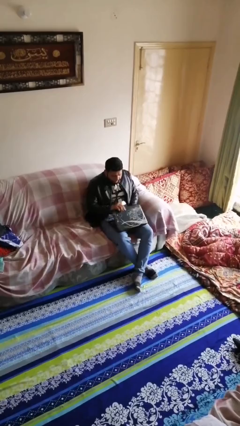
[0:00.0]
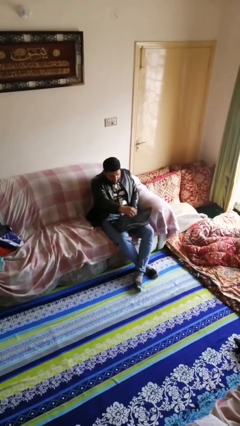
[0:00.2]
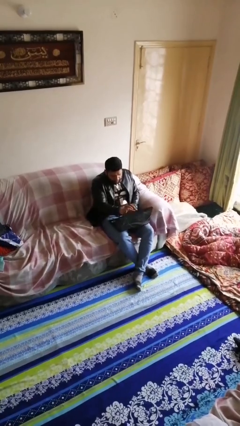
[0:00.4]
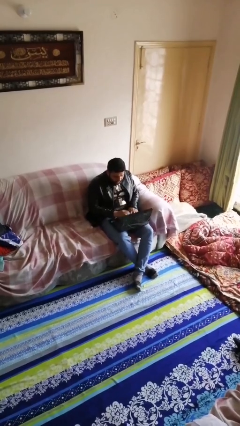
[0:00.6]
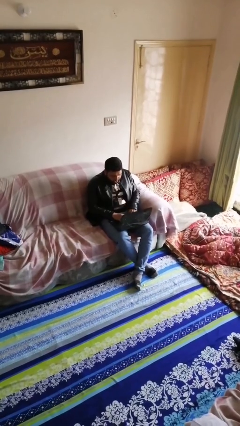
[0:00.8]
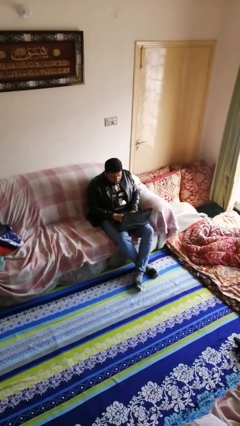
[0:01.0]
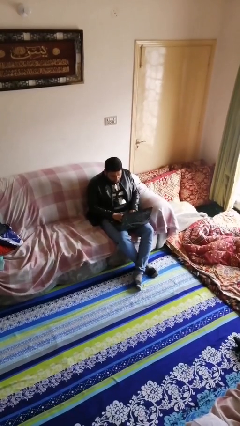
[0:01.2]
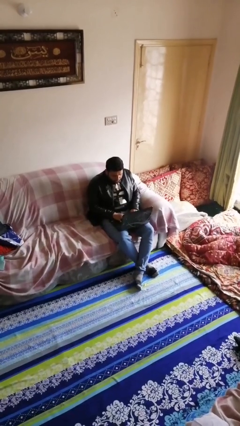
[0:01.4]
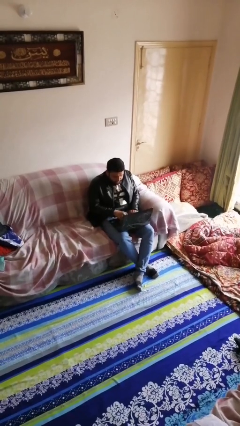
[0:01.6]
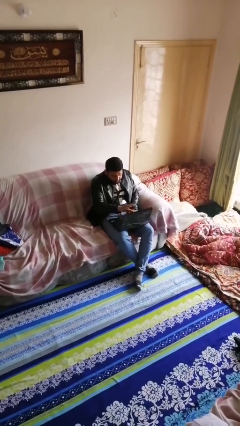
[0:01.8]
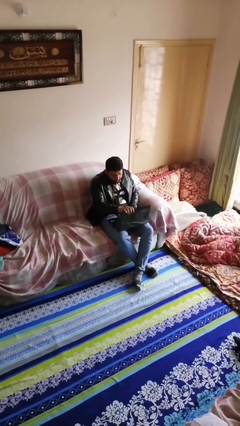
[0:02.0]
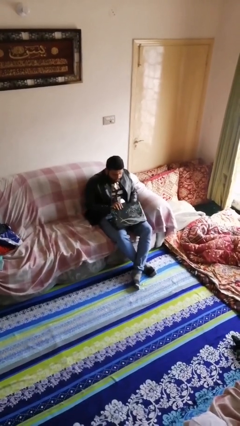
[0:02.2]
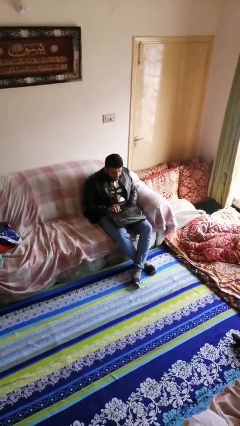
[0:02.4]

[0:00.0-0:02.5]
person interacts with laptop

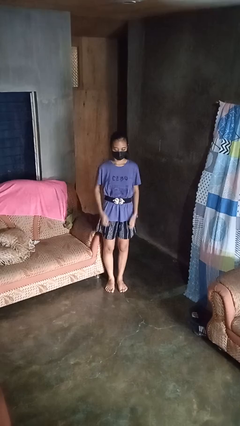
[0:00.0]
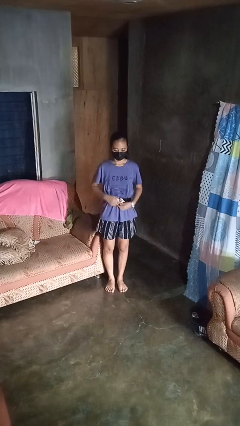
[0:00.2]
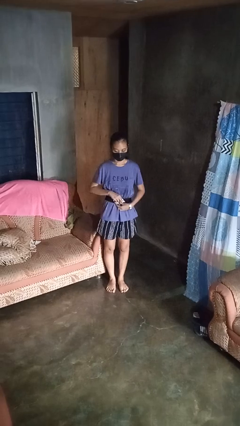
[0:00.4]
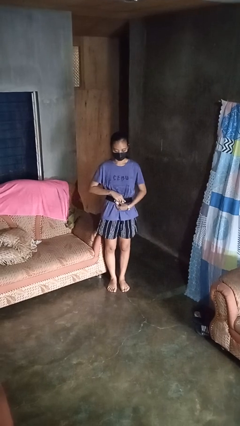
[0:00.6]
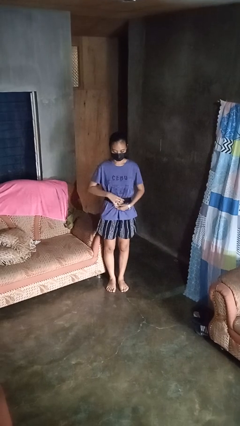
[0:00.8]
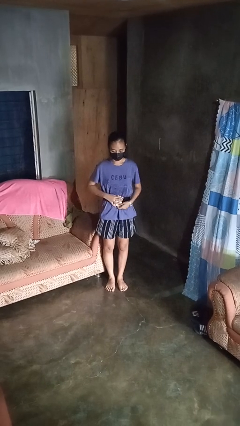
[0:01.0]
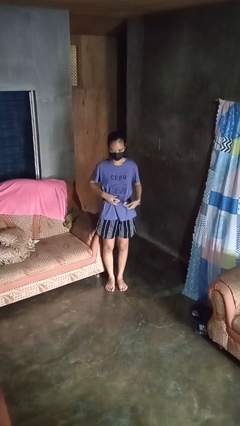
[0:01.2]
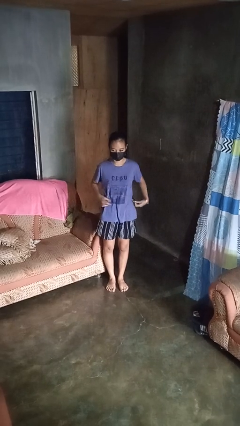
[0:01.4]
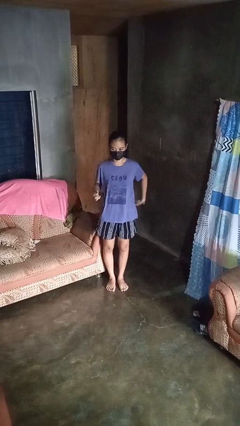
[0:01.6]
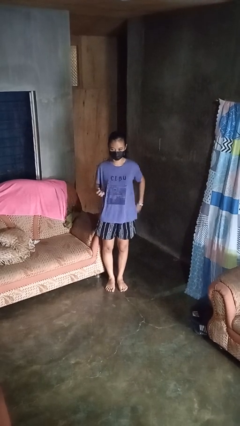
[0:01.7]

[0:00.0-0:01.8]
person takes off belt

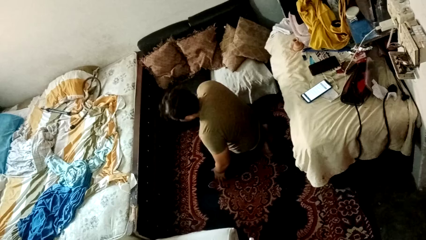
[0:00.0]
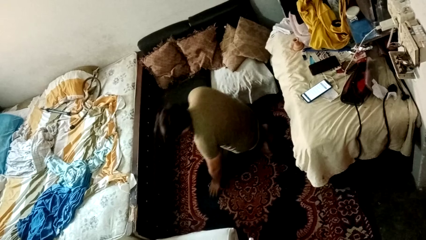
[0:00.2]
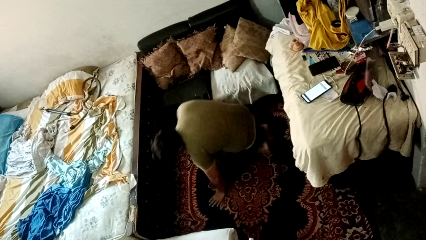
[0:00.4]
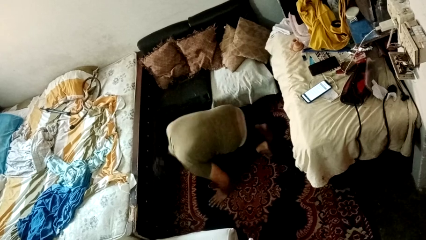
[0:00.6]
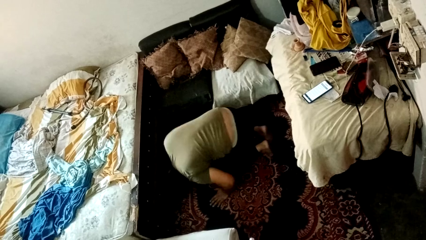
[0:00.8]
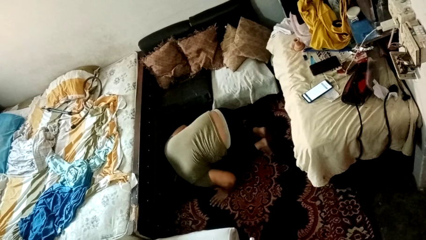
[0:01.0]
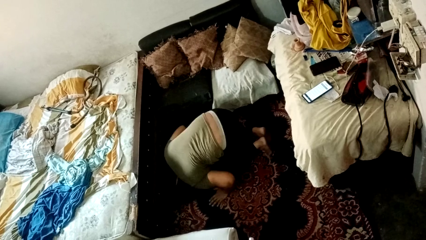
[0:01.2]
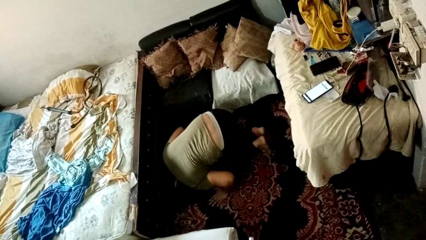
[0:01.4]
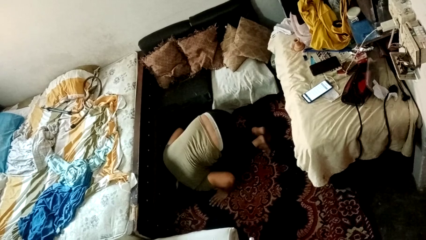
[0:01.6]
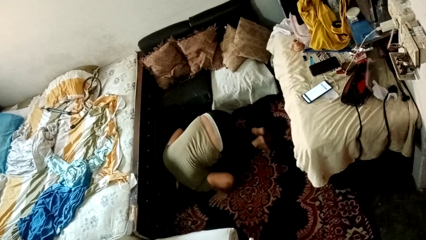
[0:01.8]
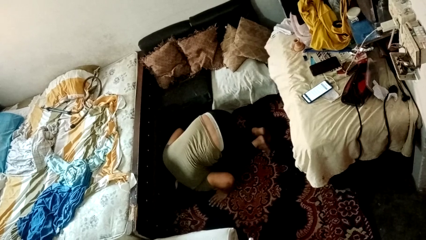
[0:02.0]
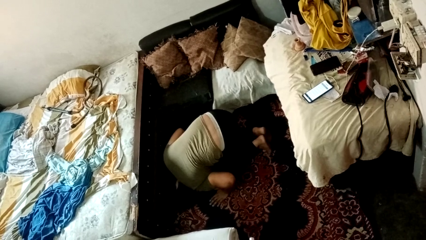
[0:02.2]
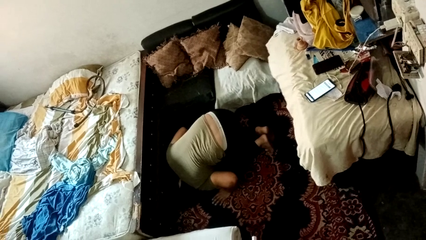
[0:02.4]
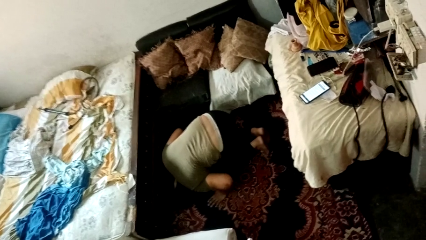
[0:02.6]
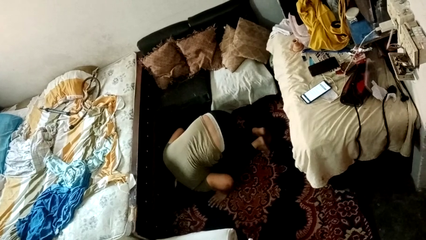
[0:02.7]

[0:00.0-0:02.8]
person searches under bed

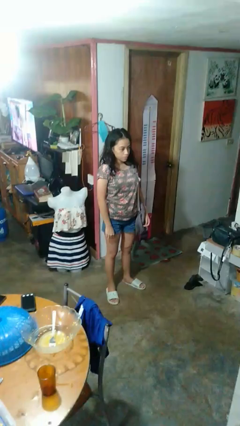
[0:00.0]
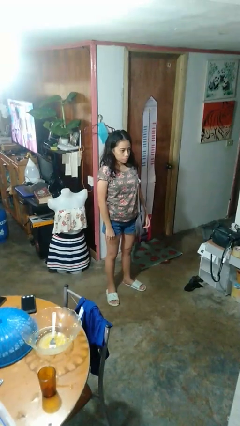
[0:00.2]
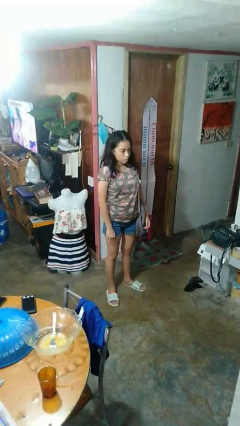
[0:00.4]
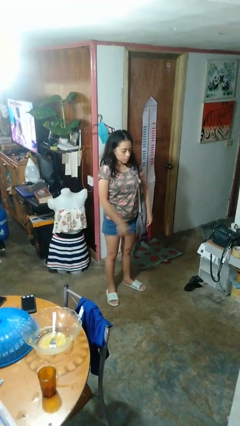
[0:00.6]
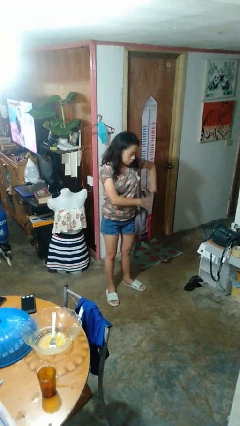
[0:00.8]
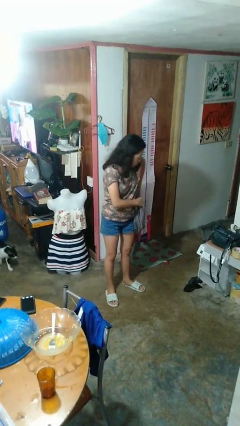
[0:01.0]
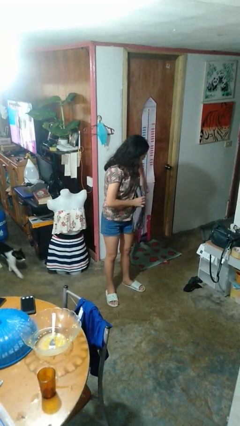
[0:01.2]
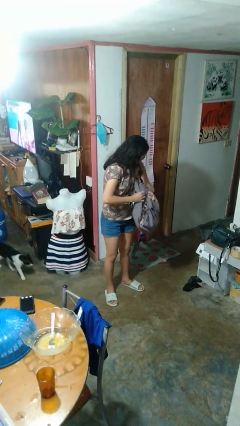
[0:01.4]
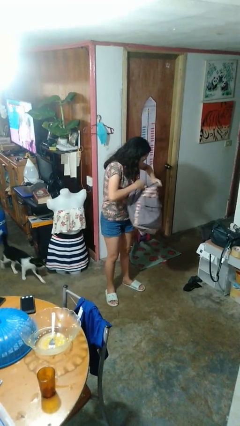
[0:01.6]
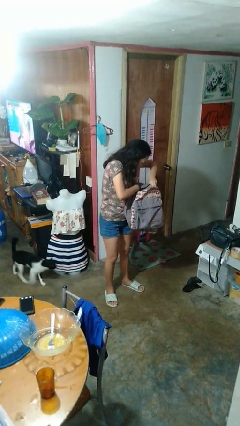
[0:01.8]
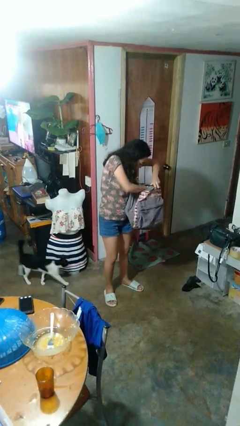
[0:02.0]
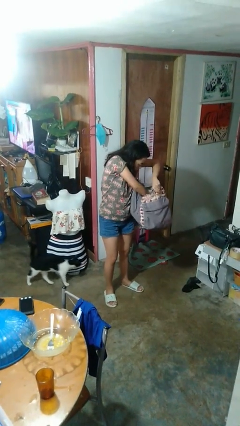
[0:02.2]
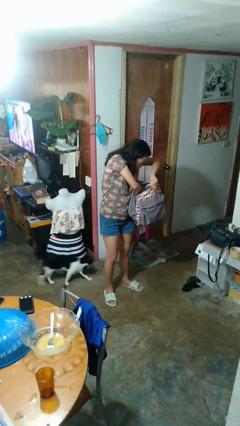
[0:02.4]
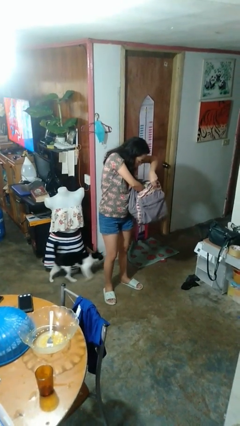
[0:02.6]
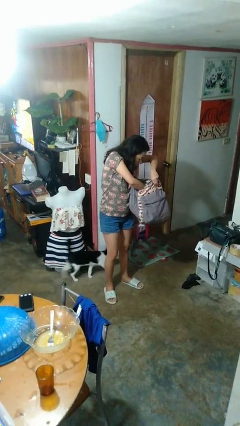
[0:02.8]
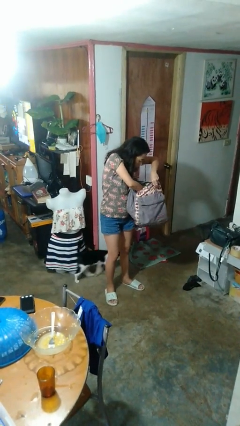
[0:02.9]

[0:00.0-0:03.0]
person searches in backpack

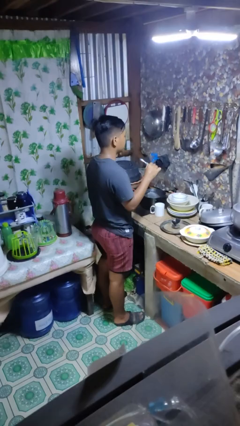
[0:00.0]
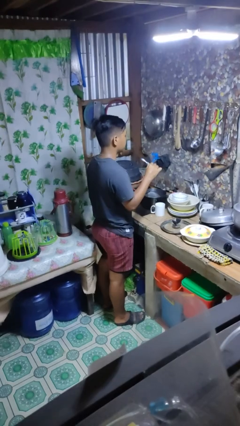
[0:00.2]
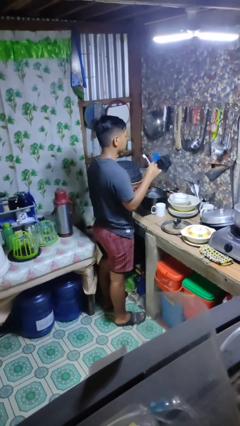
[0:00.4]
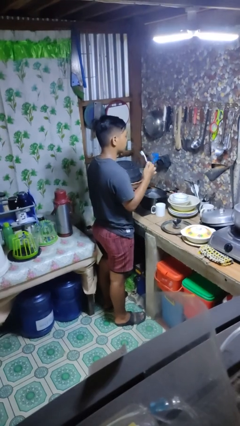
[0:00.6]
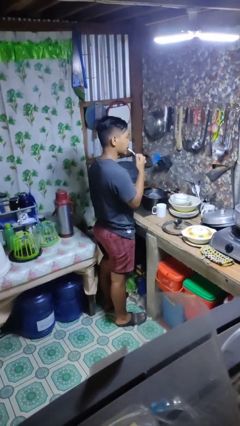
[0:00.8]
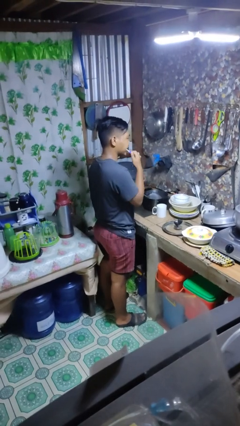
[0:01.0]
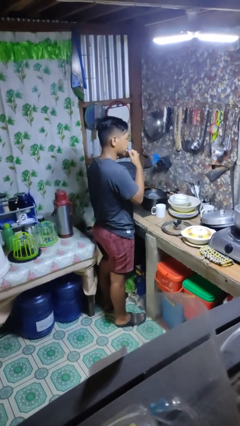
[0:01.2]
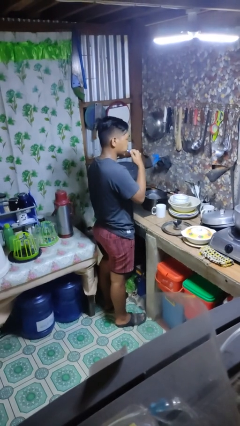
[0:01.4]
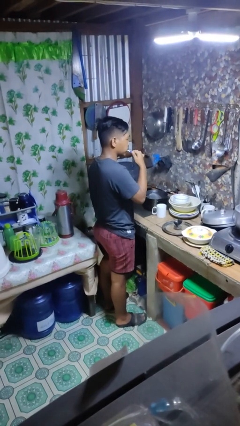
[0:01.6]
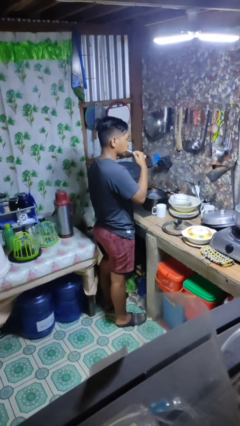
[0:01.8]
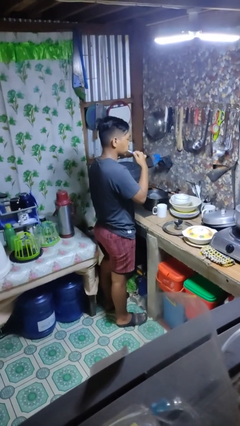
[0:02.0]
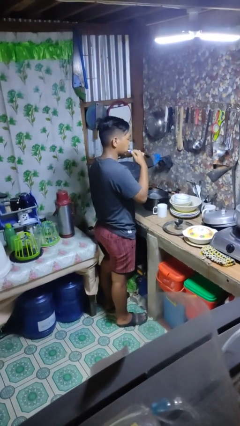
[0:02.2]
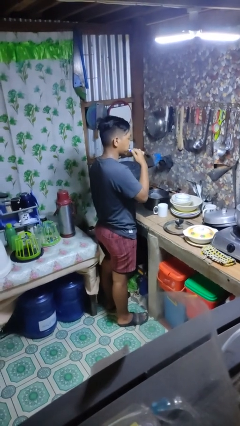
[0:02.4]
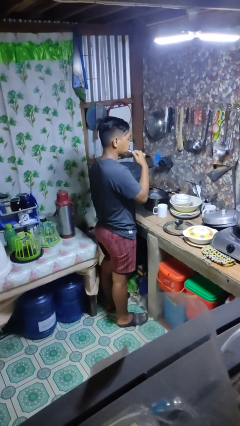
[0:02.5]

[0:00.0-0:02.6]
person brushes teeth

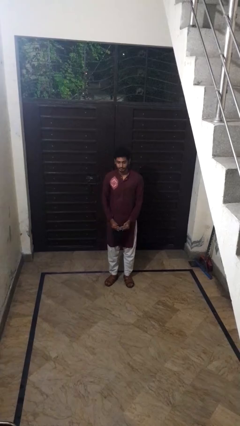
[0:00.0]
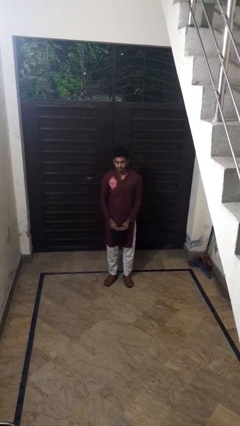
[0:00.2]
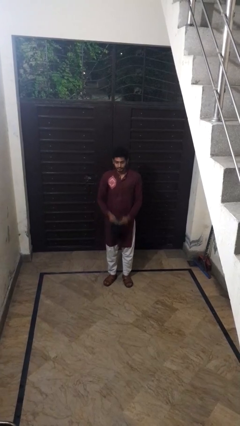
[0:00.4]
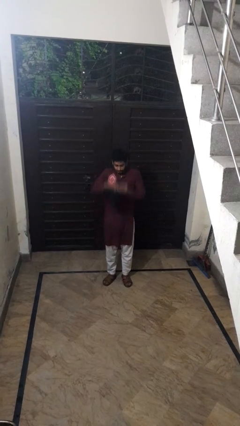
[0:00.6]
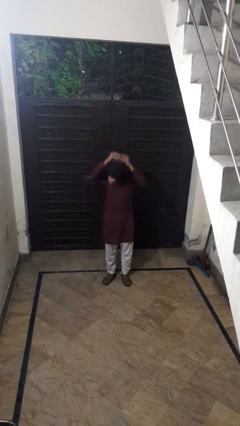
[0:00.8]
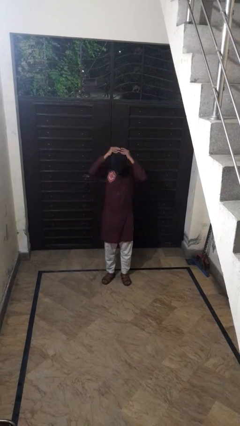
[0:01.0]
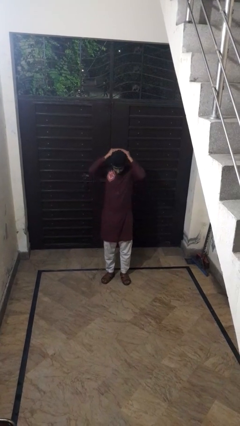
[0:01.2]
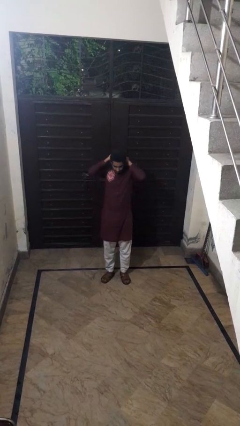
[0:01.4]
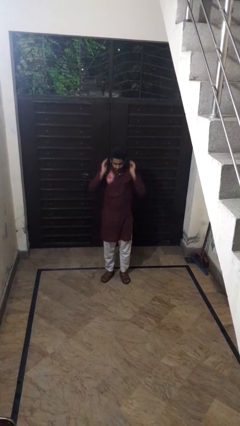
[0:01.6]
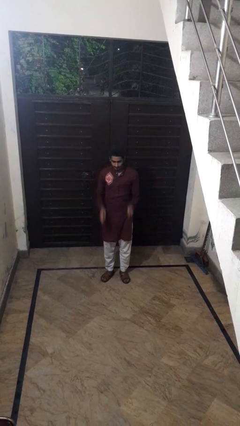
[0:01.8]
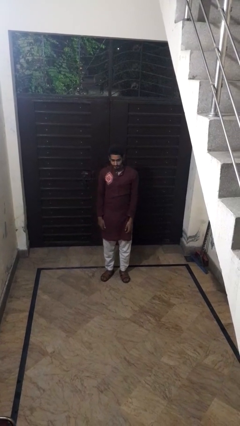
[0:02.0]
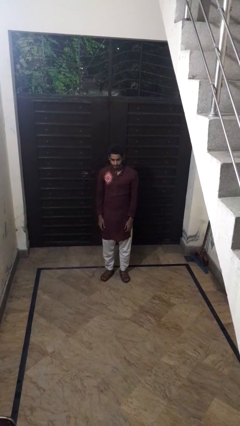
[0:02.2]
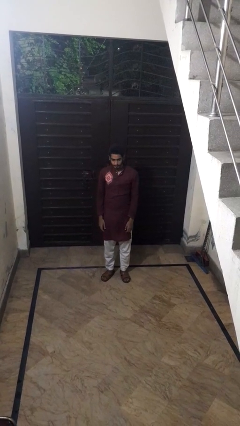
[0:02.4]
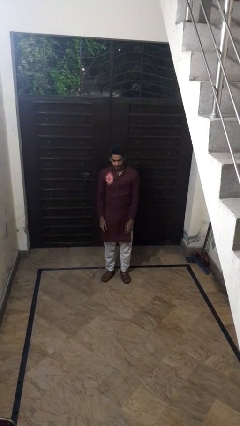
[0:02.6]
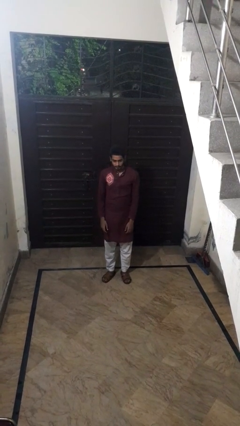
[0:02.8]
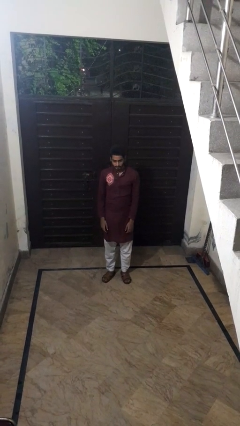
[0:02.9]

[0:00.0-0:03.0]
person puts on hat

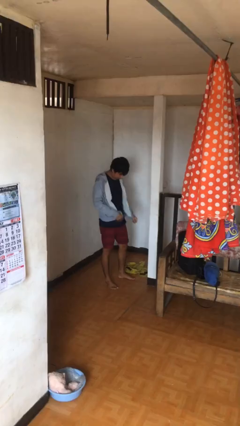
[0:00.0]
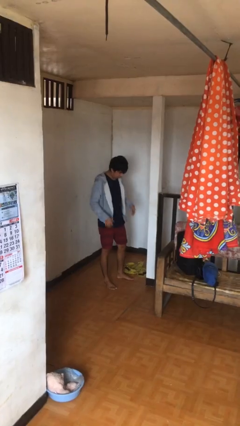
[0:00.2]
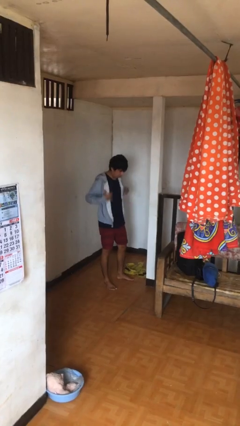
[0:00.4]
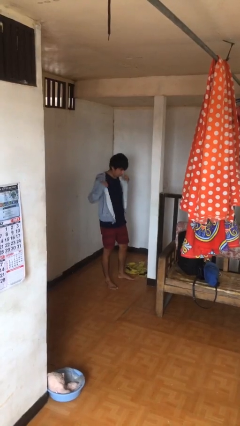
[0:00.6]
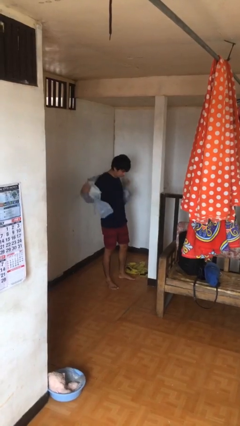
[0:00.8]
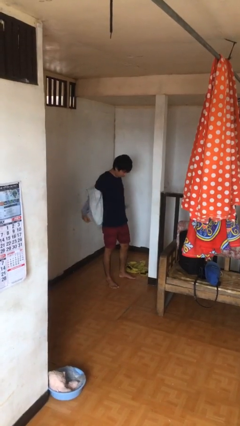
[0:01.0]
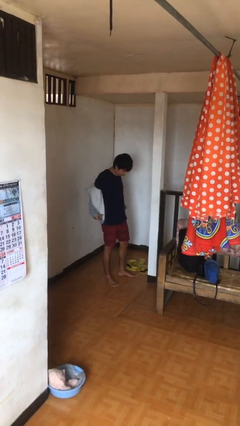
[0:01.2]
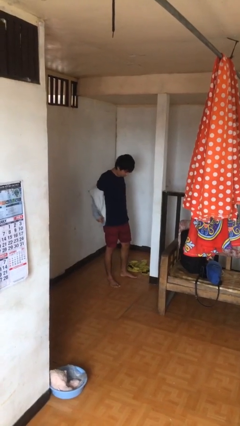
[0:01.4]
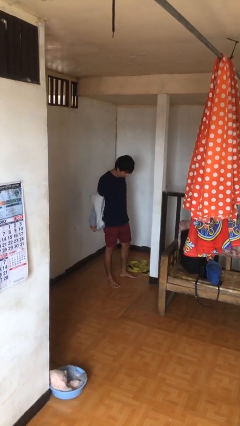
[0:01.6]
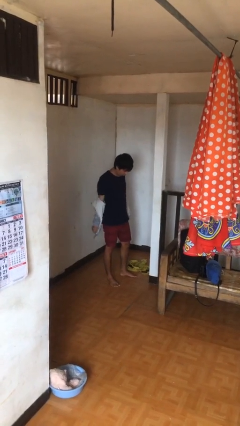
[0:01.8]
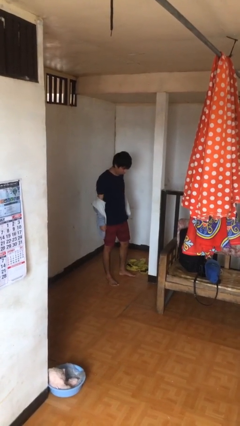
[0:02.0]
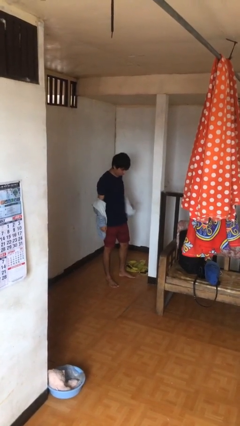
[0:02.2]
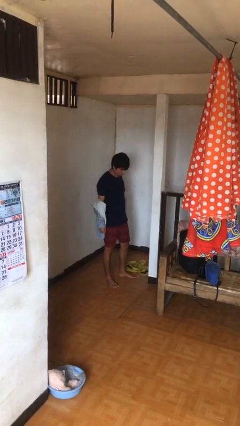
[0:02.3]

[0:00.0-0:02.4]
person takes off jacket
